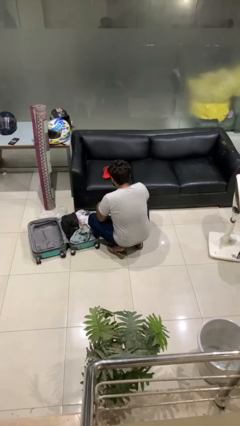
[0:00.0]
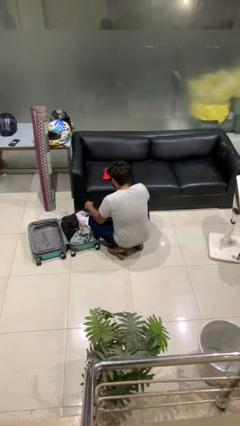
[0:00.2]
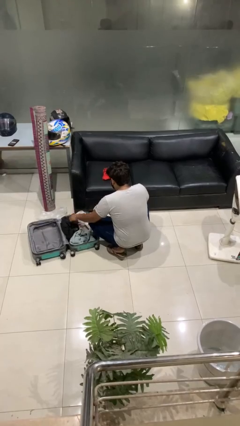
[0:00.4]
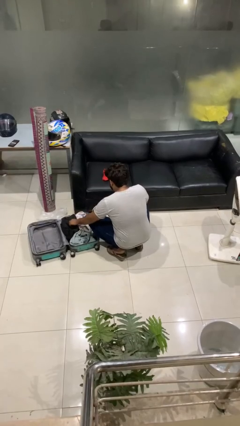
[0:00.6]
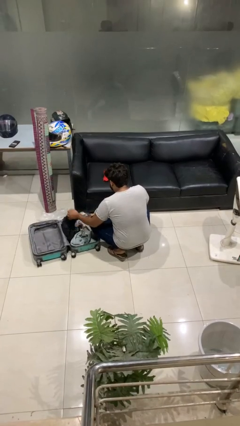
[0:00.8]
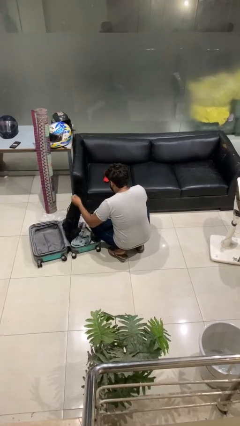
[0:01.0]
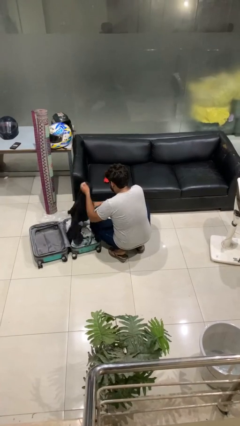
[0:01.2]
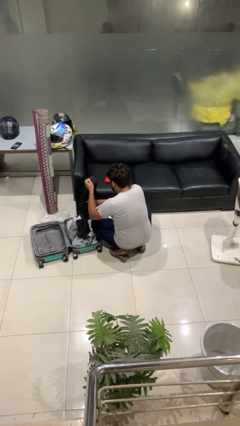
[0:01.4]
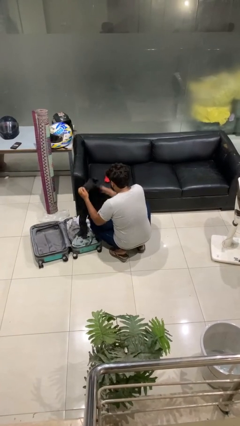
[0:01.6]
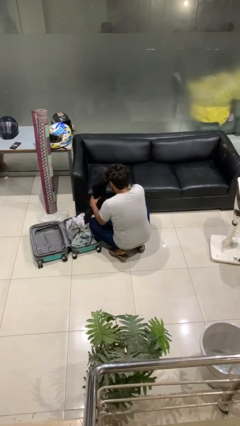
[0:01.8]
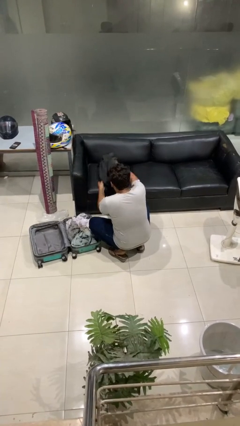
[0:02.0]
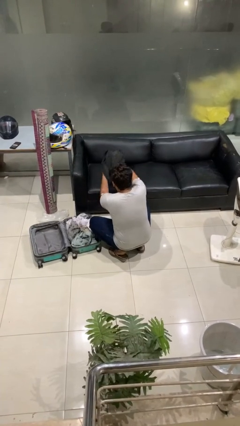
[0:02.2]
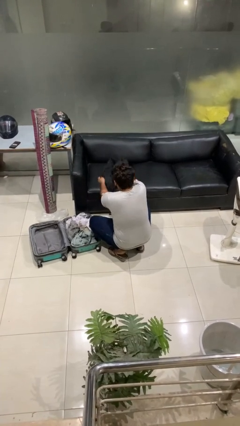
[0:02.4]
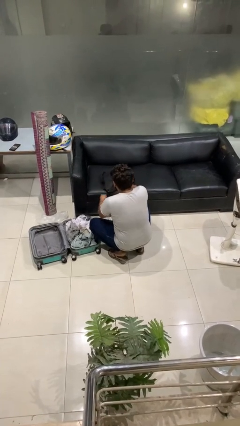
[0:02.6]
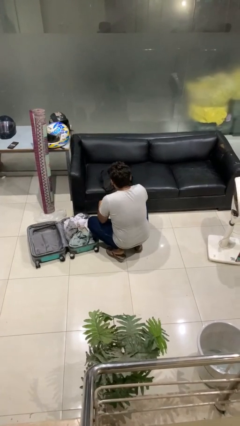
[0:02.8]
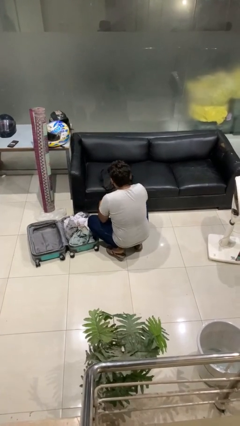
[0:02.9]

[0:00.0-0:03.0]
person unloads clothes from suitcase

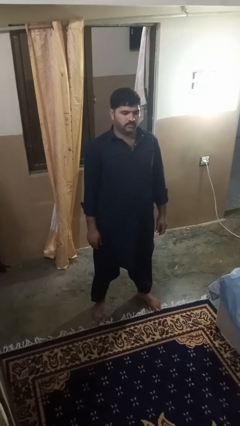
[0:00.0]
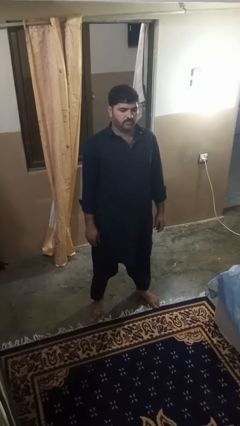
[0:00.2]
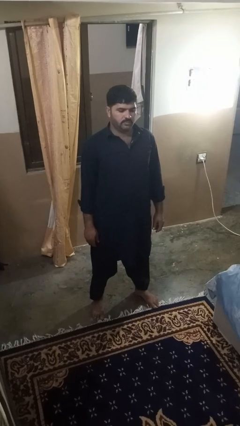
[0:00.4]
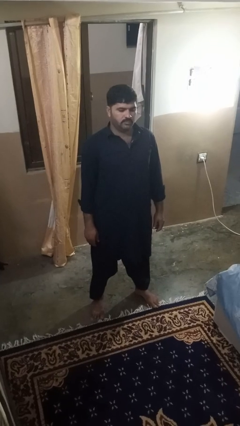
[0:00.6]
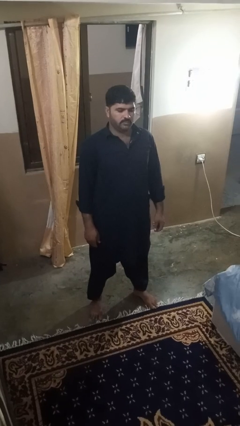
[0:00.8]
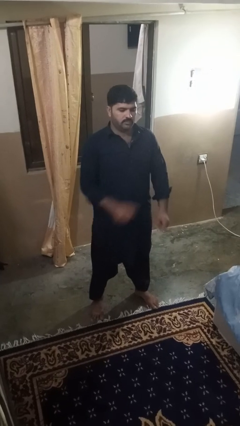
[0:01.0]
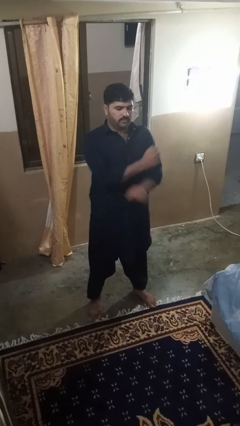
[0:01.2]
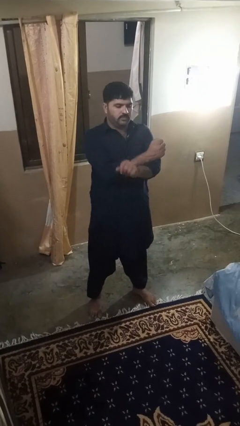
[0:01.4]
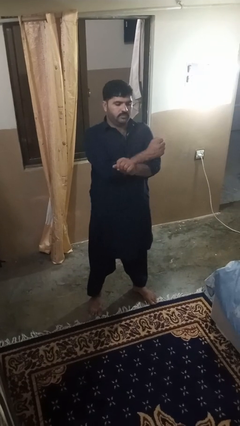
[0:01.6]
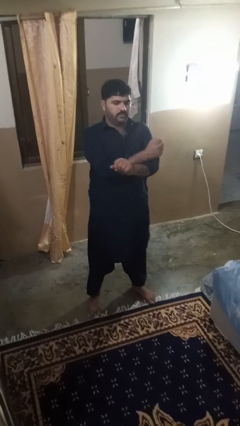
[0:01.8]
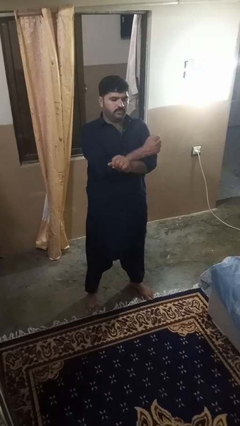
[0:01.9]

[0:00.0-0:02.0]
person crosses arms

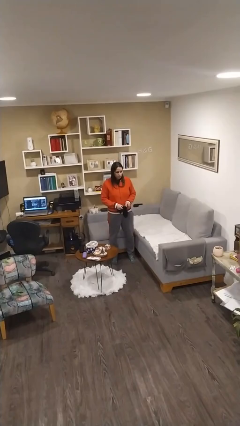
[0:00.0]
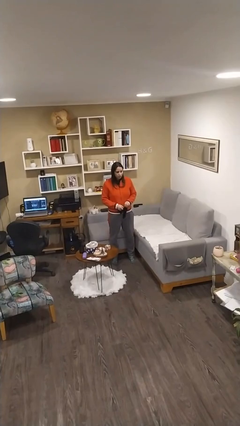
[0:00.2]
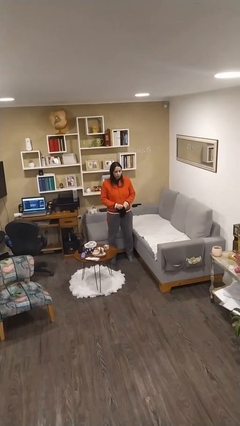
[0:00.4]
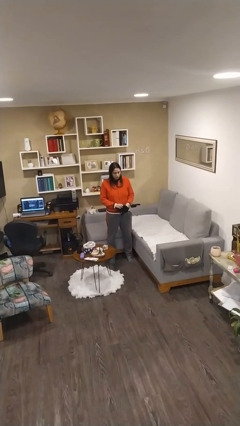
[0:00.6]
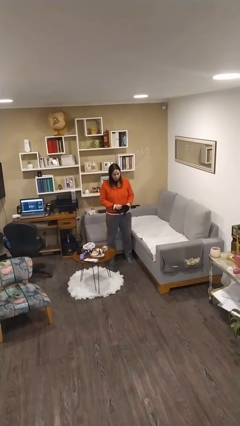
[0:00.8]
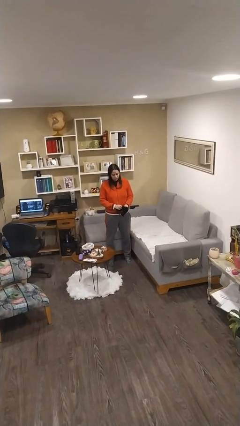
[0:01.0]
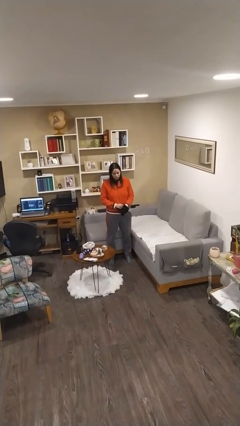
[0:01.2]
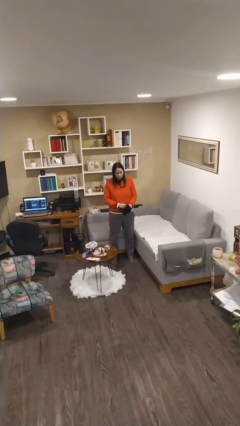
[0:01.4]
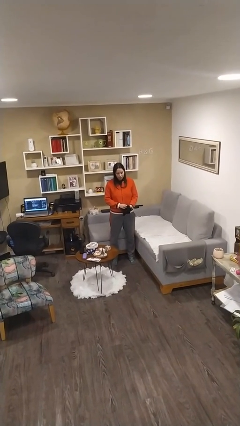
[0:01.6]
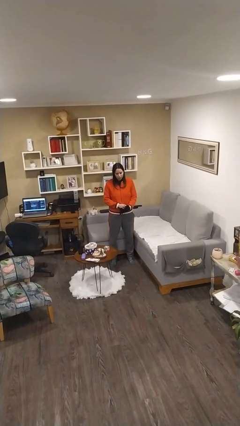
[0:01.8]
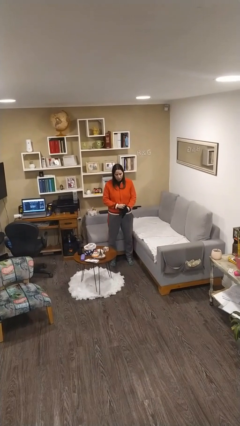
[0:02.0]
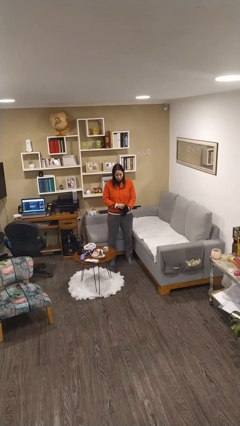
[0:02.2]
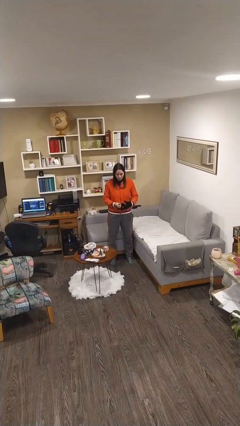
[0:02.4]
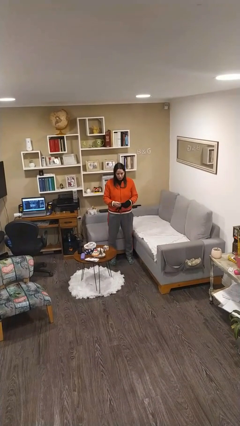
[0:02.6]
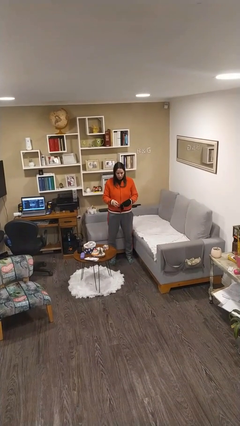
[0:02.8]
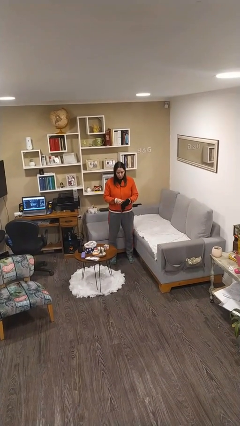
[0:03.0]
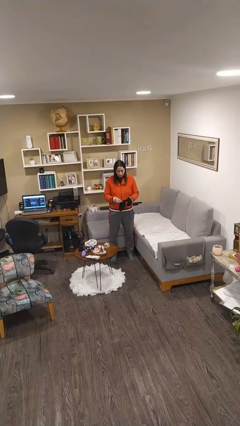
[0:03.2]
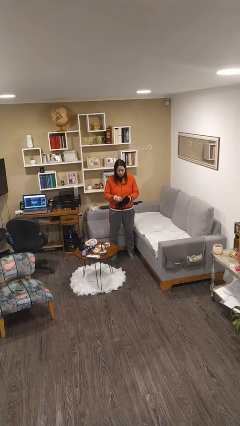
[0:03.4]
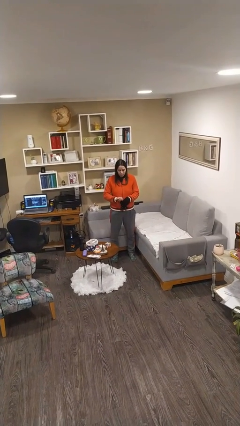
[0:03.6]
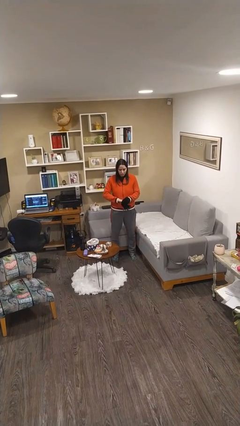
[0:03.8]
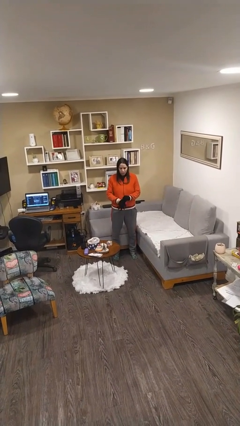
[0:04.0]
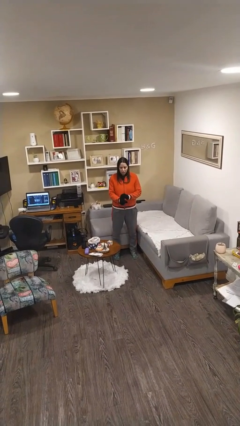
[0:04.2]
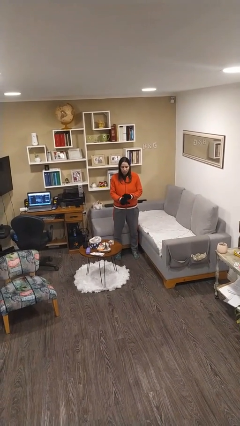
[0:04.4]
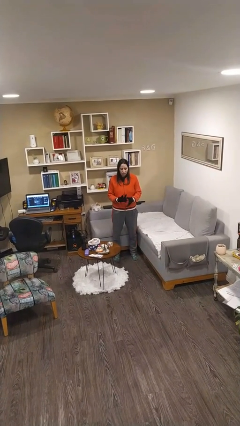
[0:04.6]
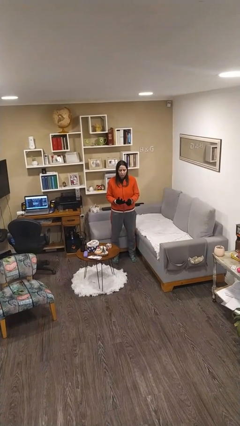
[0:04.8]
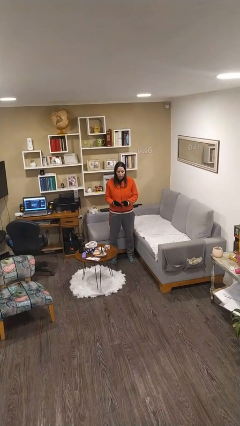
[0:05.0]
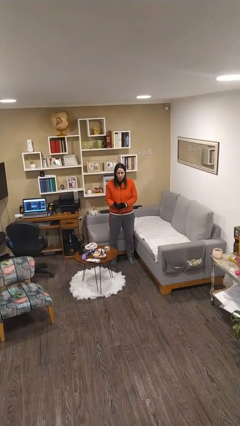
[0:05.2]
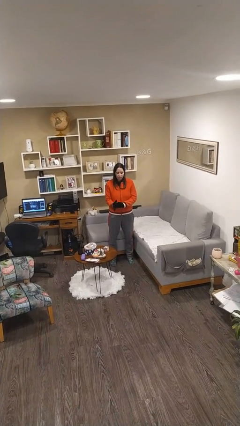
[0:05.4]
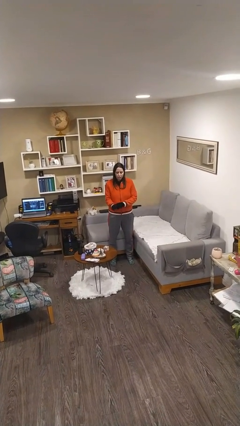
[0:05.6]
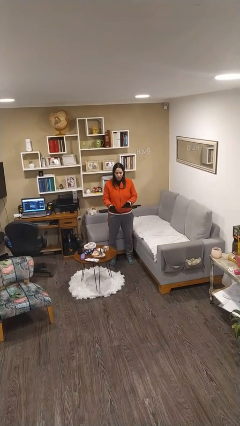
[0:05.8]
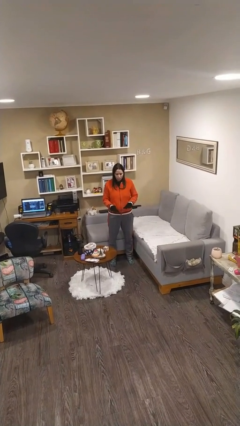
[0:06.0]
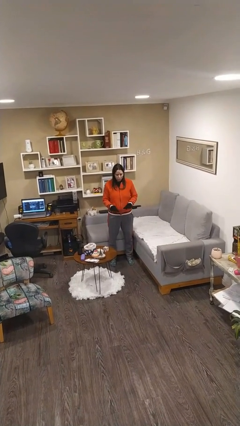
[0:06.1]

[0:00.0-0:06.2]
person puts on gloves

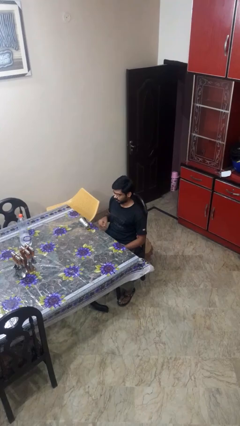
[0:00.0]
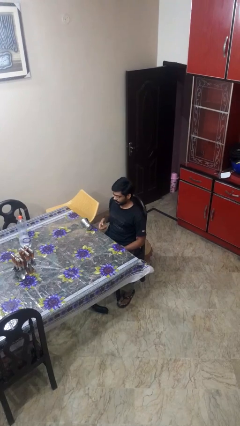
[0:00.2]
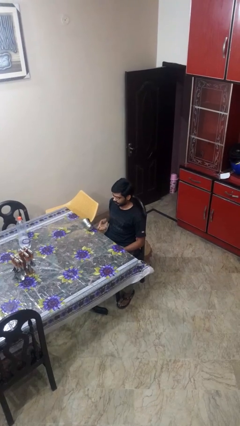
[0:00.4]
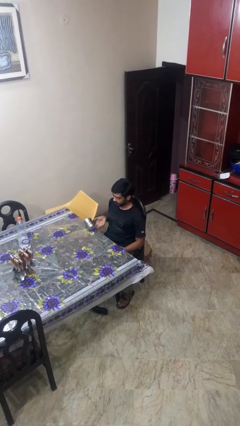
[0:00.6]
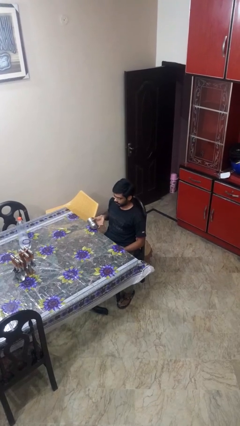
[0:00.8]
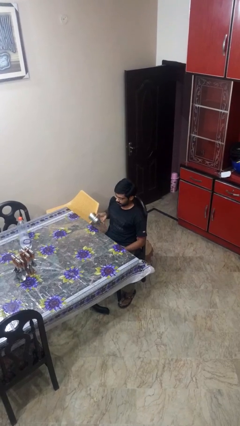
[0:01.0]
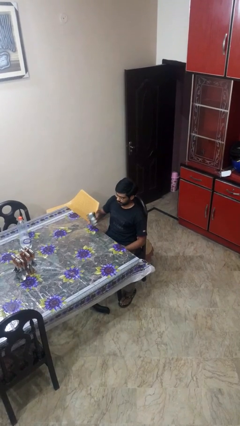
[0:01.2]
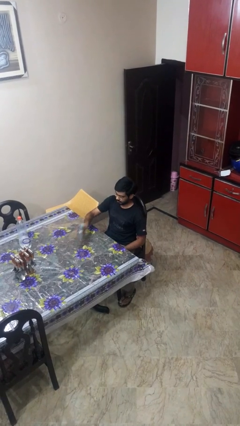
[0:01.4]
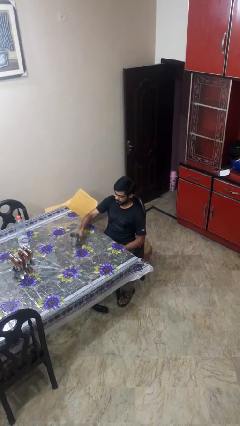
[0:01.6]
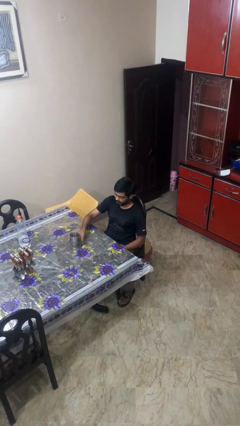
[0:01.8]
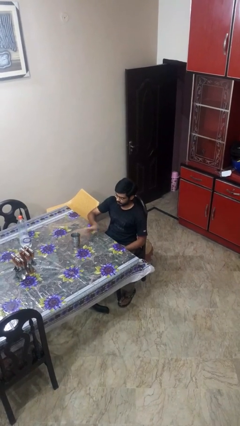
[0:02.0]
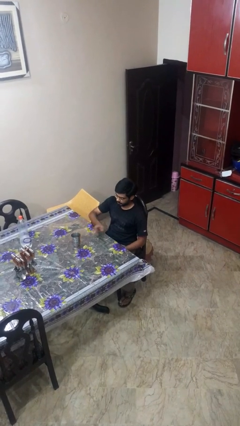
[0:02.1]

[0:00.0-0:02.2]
person sets upright glass

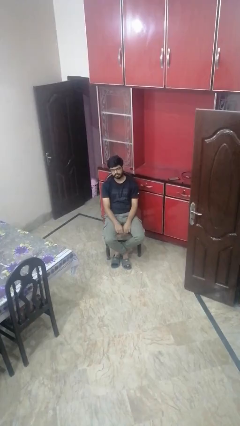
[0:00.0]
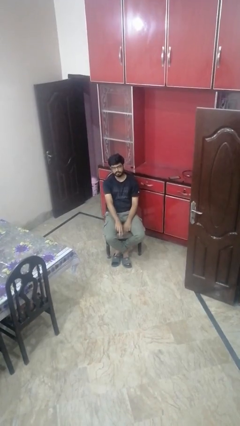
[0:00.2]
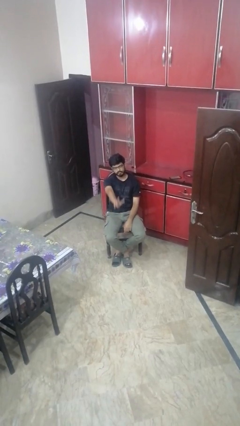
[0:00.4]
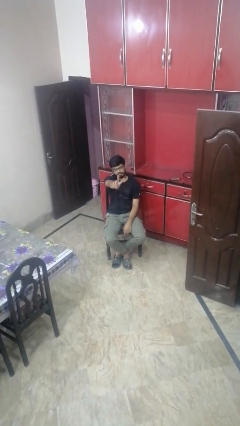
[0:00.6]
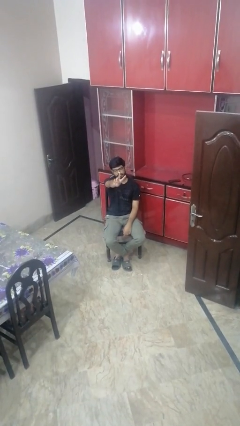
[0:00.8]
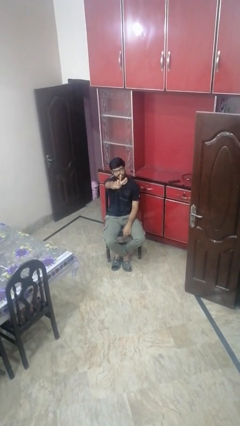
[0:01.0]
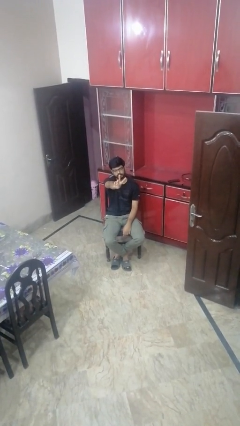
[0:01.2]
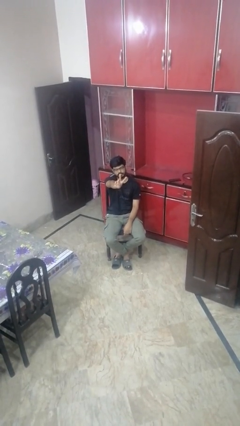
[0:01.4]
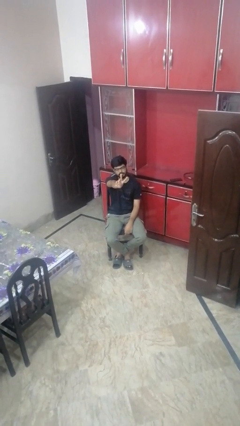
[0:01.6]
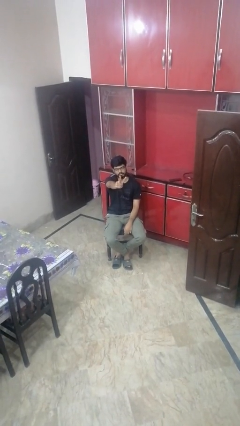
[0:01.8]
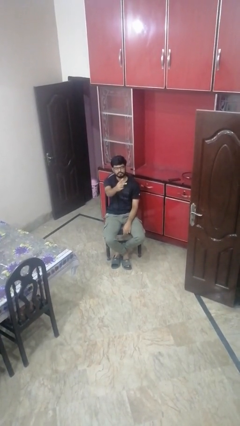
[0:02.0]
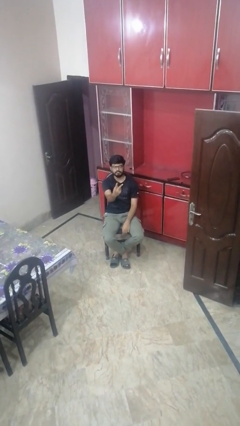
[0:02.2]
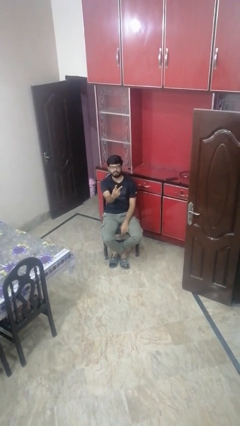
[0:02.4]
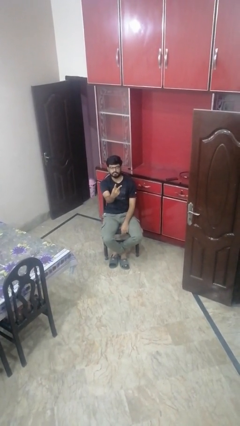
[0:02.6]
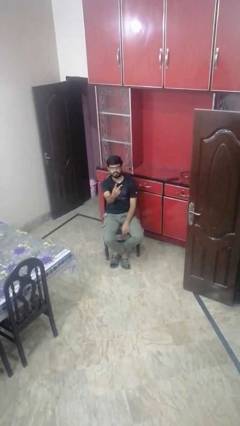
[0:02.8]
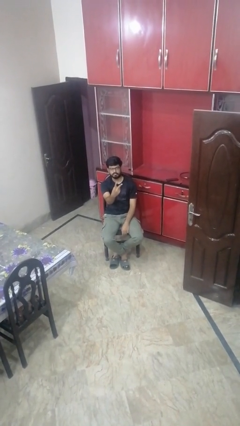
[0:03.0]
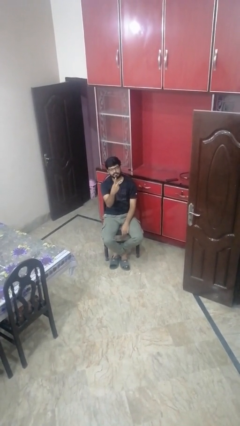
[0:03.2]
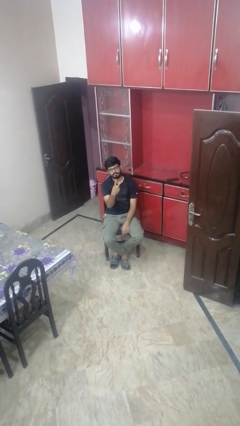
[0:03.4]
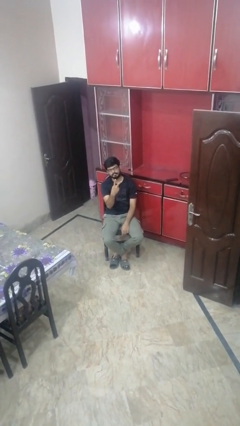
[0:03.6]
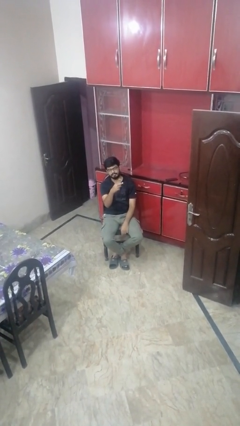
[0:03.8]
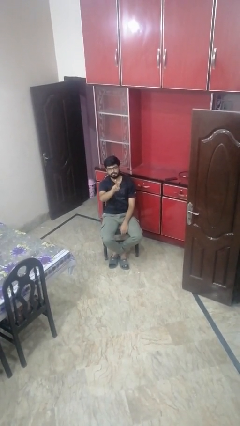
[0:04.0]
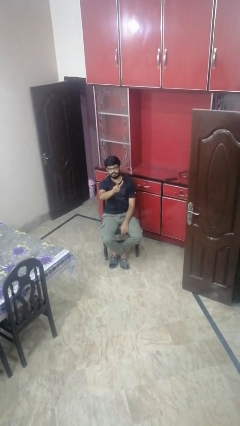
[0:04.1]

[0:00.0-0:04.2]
person gestures peace

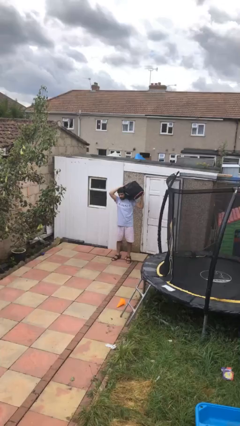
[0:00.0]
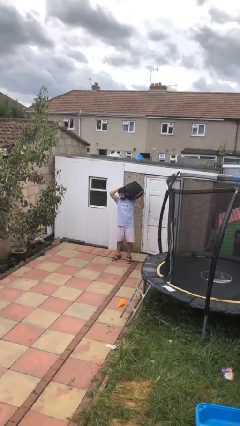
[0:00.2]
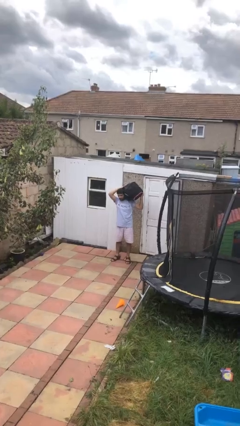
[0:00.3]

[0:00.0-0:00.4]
person carries heavy object
